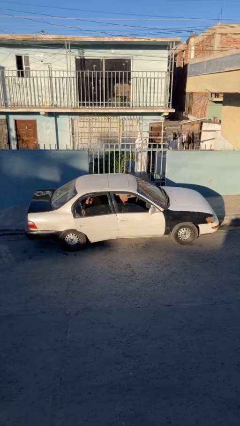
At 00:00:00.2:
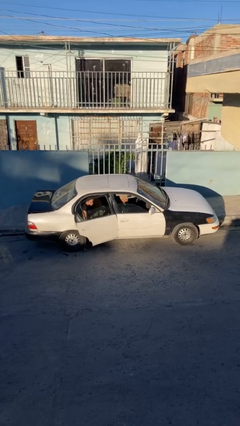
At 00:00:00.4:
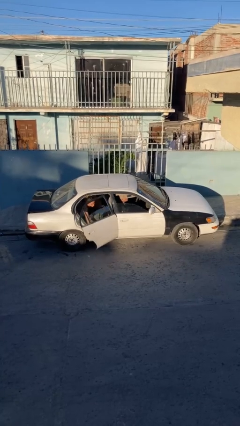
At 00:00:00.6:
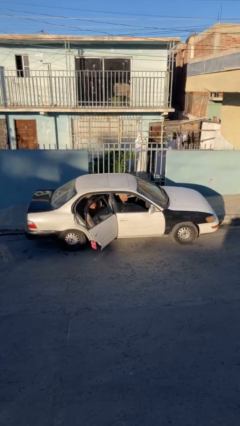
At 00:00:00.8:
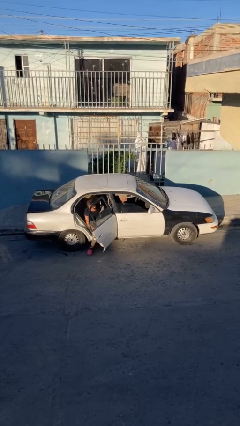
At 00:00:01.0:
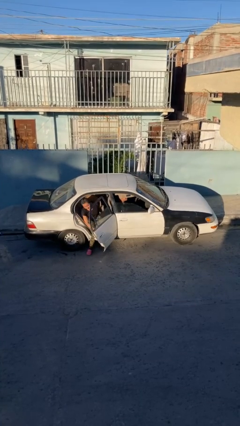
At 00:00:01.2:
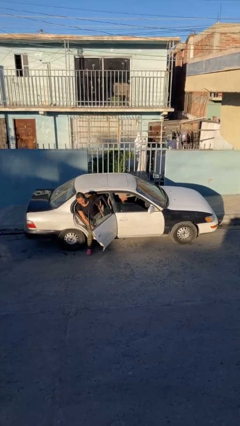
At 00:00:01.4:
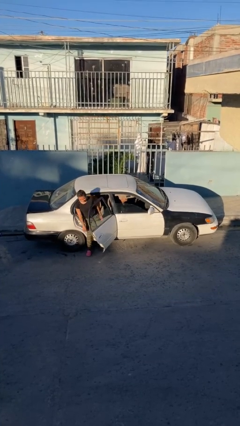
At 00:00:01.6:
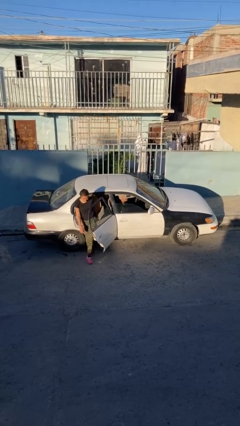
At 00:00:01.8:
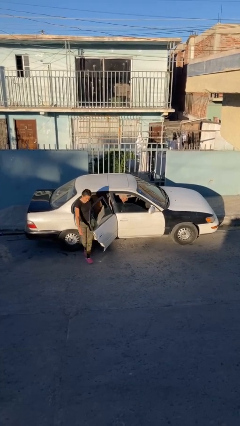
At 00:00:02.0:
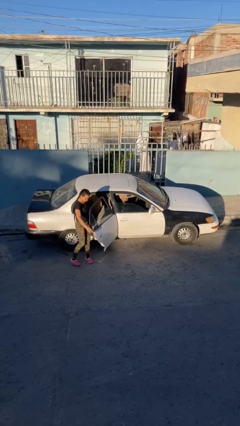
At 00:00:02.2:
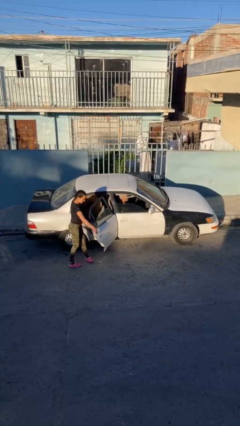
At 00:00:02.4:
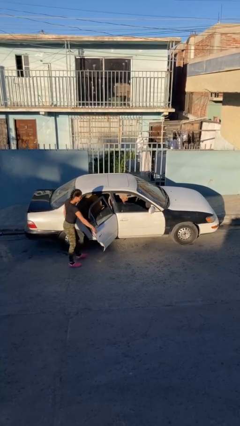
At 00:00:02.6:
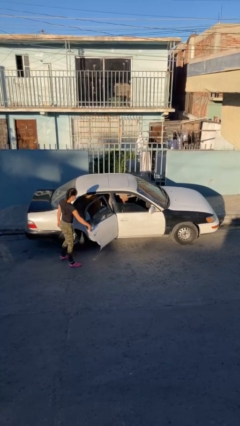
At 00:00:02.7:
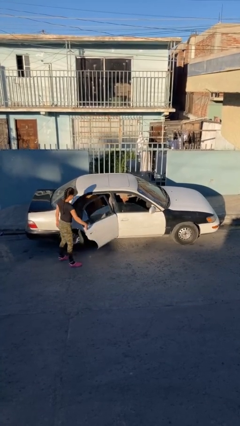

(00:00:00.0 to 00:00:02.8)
car drops off person

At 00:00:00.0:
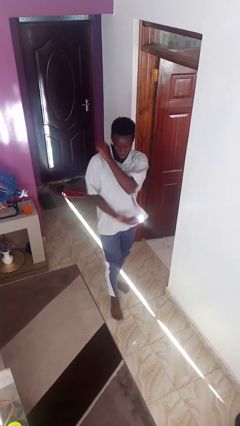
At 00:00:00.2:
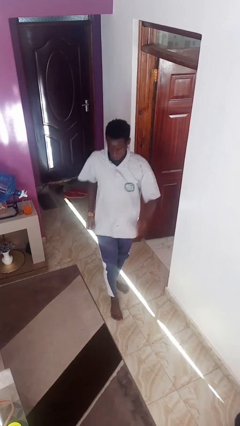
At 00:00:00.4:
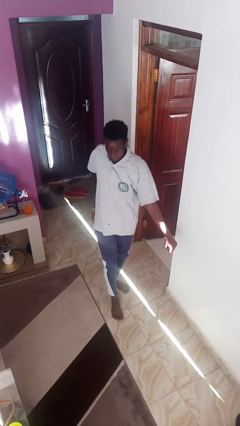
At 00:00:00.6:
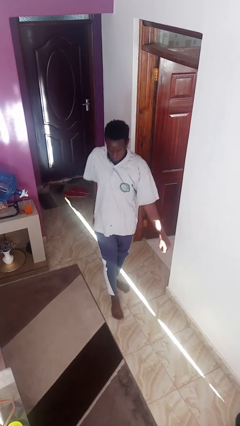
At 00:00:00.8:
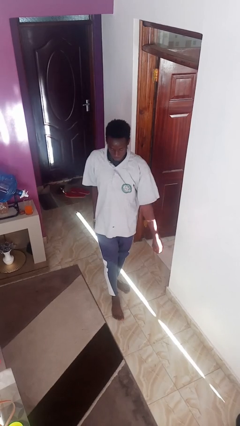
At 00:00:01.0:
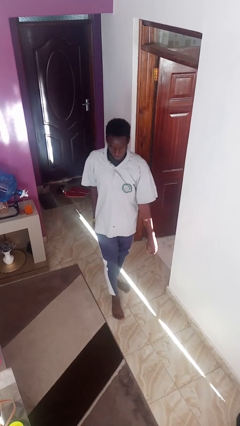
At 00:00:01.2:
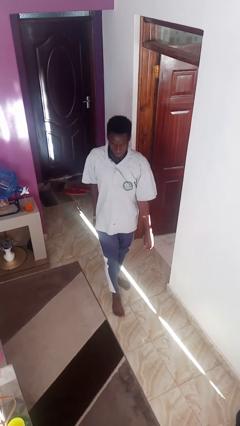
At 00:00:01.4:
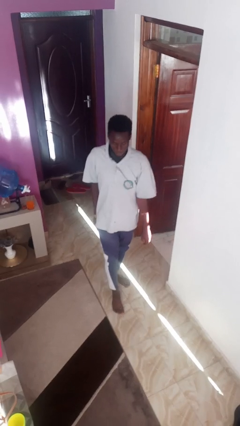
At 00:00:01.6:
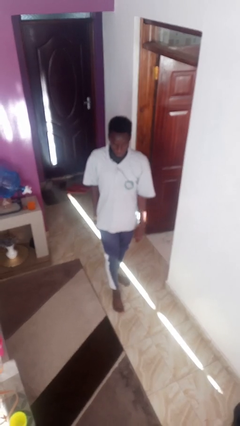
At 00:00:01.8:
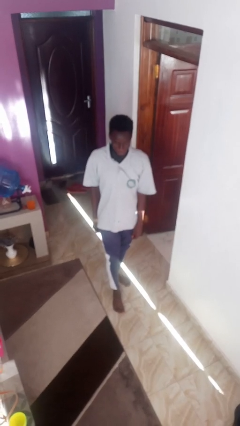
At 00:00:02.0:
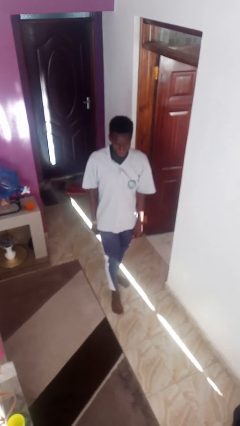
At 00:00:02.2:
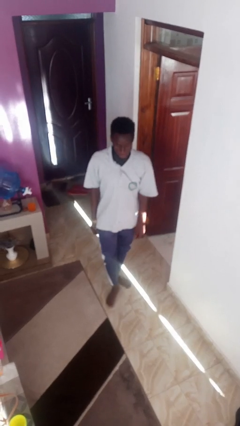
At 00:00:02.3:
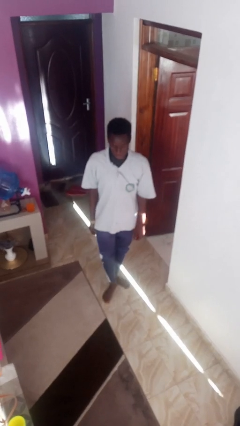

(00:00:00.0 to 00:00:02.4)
person karate chop

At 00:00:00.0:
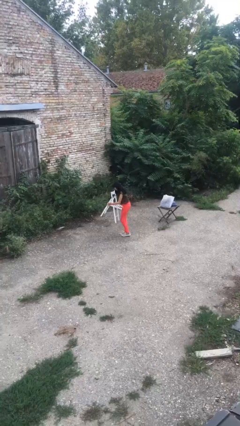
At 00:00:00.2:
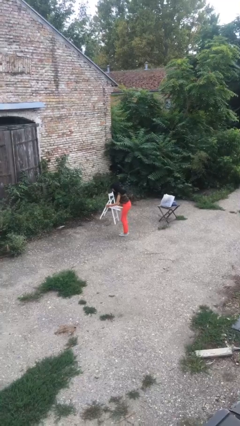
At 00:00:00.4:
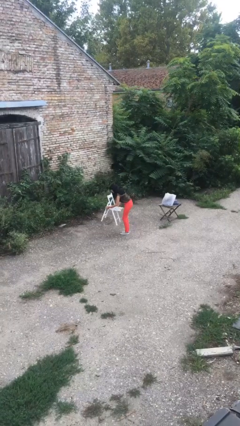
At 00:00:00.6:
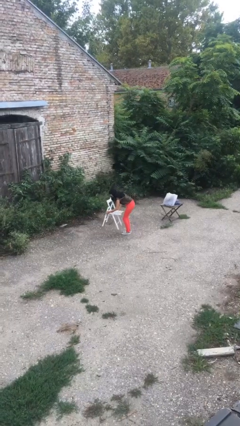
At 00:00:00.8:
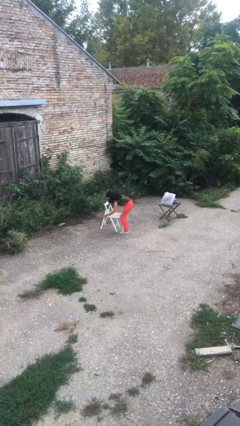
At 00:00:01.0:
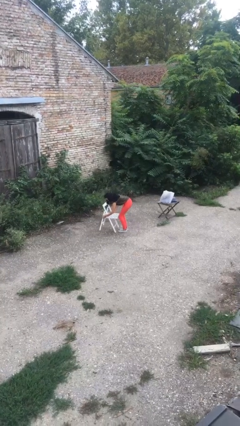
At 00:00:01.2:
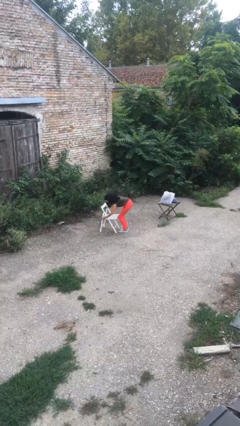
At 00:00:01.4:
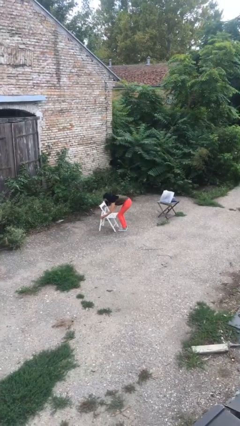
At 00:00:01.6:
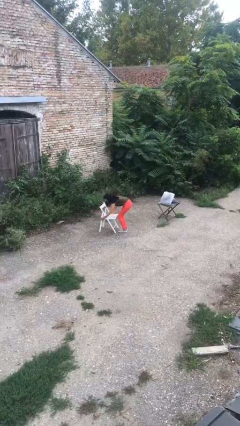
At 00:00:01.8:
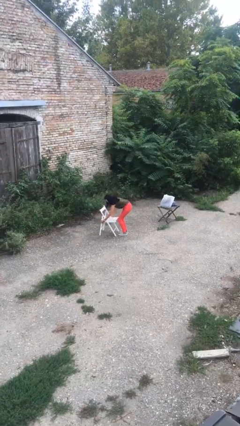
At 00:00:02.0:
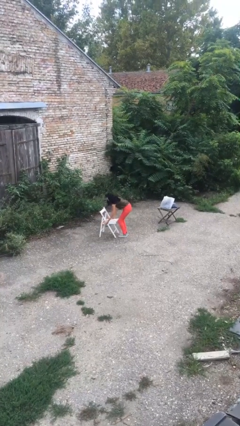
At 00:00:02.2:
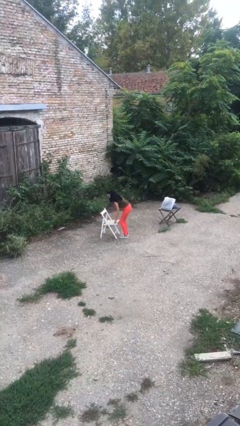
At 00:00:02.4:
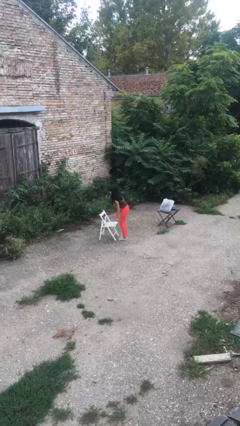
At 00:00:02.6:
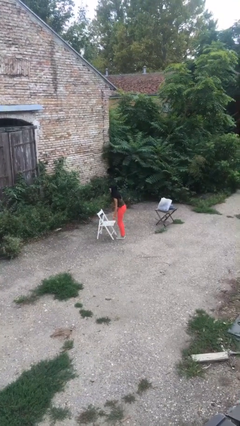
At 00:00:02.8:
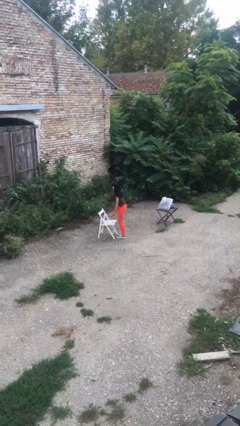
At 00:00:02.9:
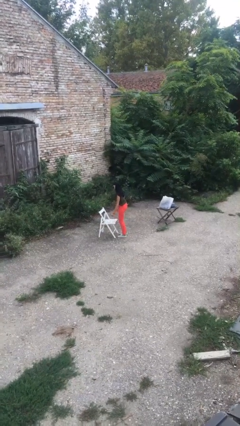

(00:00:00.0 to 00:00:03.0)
person puts down object on floor

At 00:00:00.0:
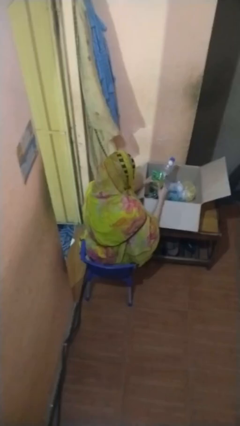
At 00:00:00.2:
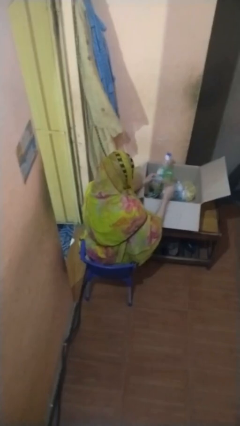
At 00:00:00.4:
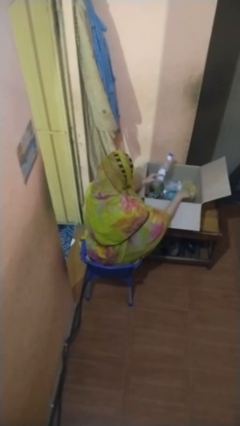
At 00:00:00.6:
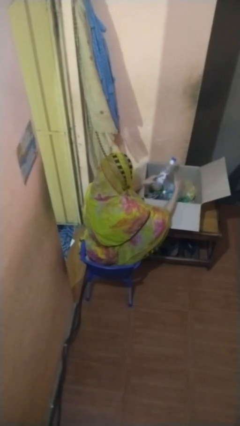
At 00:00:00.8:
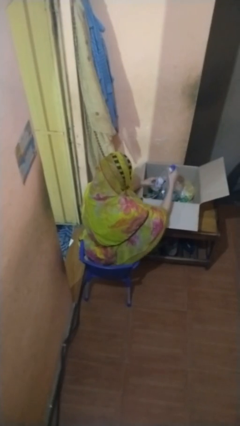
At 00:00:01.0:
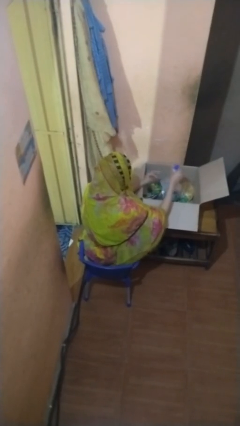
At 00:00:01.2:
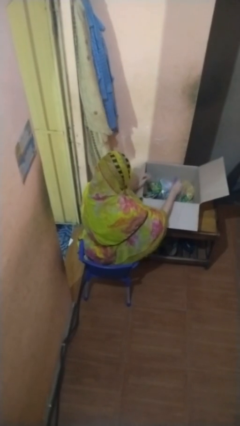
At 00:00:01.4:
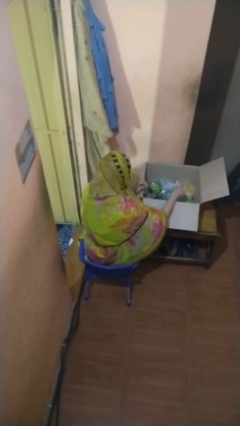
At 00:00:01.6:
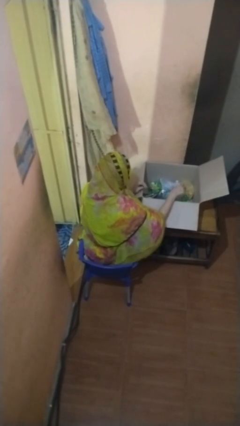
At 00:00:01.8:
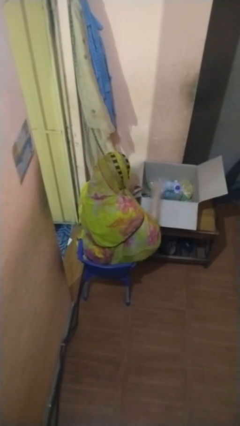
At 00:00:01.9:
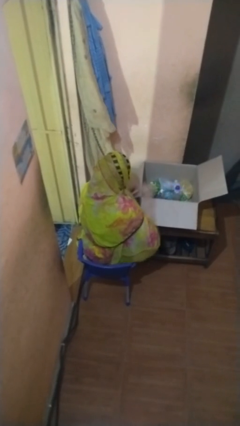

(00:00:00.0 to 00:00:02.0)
person puts object into box

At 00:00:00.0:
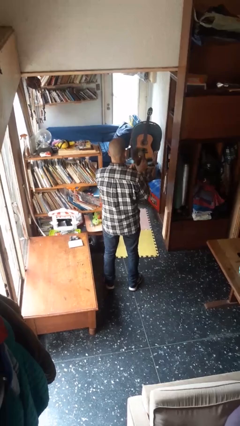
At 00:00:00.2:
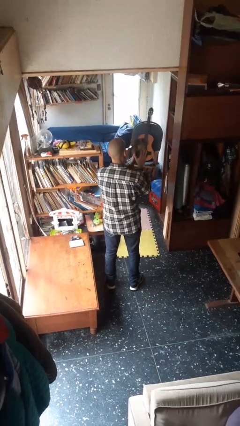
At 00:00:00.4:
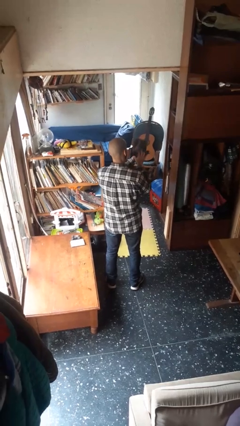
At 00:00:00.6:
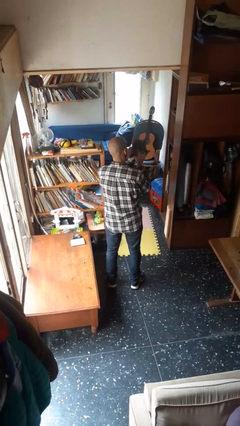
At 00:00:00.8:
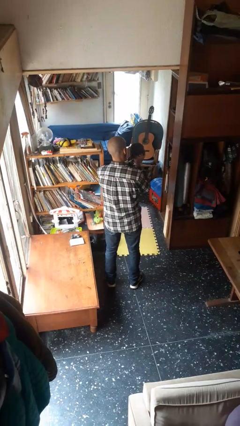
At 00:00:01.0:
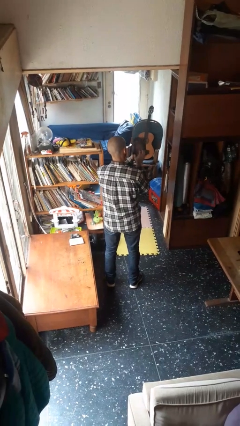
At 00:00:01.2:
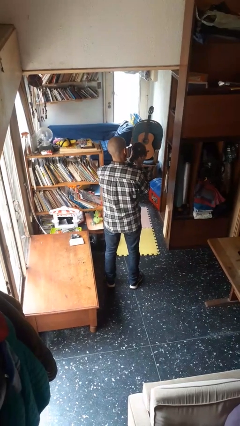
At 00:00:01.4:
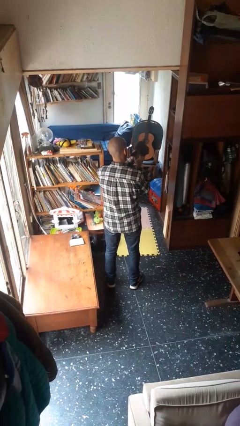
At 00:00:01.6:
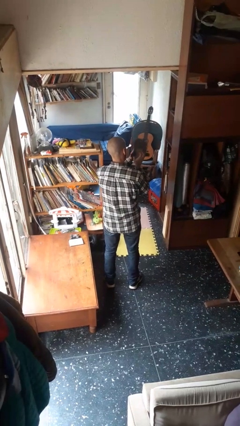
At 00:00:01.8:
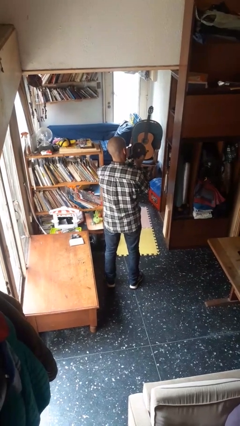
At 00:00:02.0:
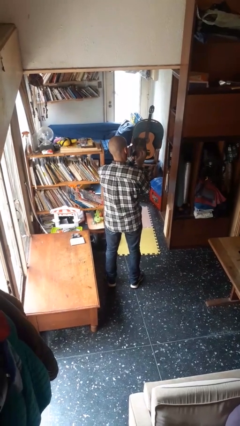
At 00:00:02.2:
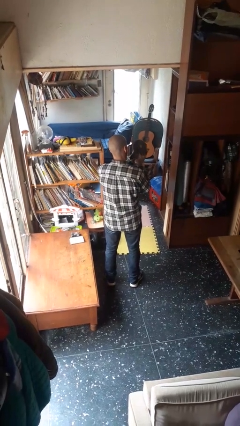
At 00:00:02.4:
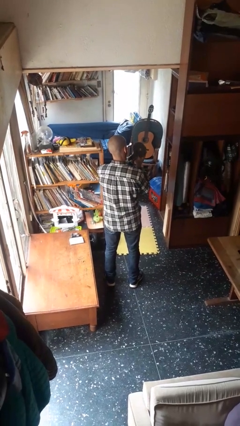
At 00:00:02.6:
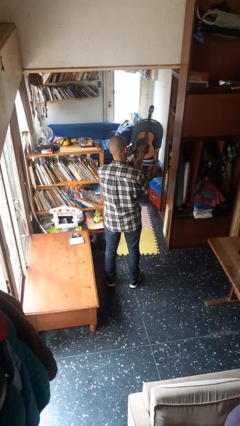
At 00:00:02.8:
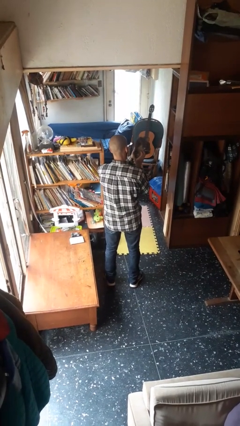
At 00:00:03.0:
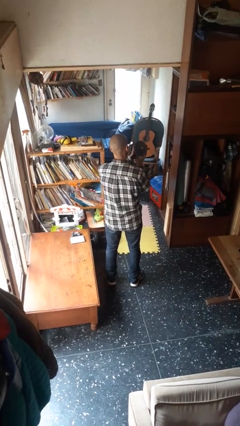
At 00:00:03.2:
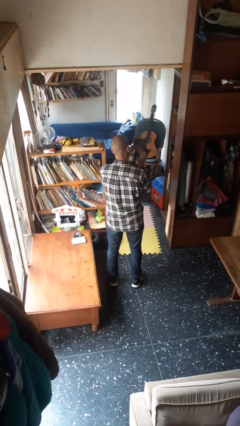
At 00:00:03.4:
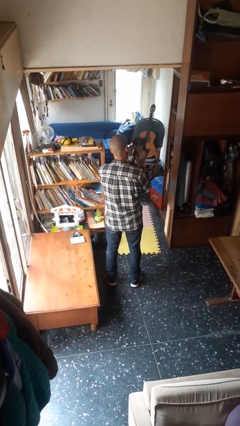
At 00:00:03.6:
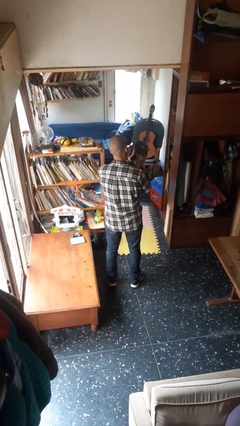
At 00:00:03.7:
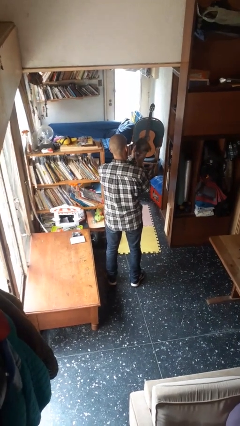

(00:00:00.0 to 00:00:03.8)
person squeezes object

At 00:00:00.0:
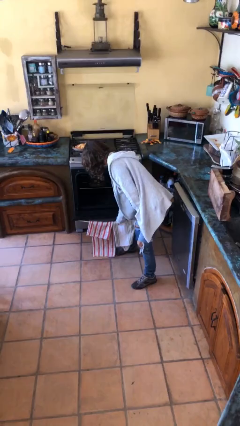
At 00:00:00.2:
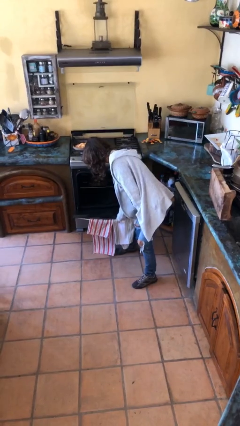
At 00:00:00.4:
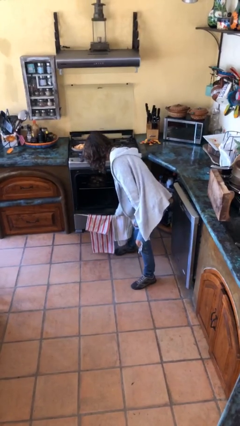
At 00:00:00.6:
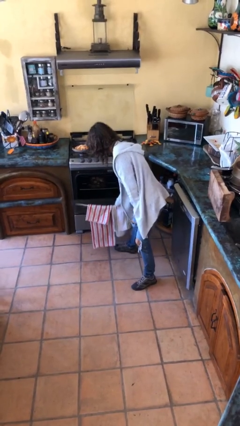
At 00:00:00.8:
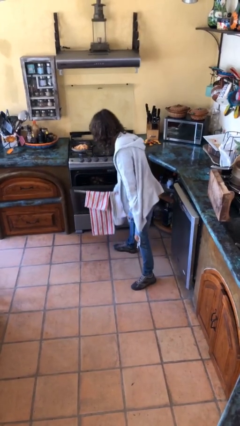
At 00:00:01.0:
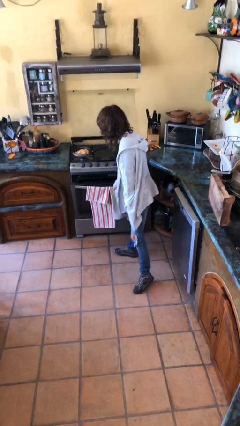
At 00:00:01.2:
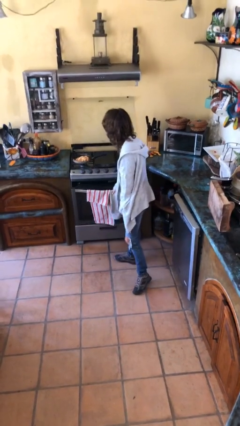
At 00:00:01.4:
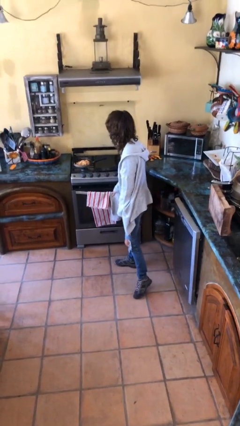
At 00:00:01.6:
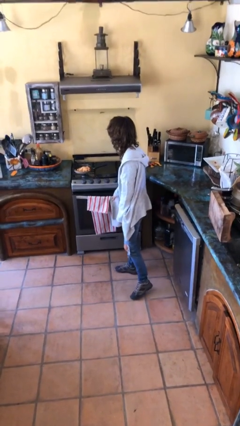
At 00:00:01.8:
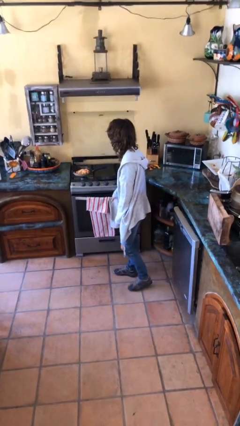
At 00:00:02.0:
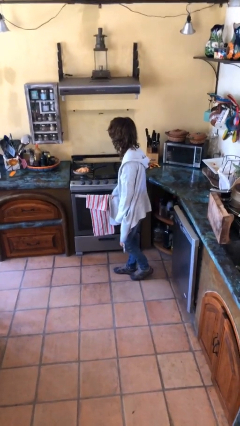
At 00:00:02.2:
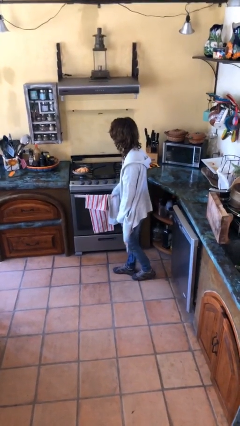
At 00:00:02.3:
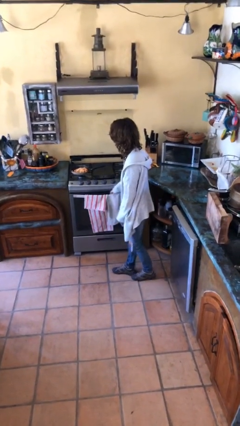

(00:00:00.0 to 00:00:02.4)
person closes oven door

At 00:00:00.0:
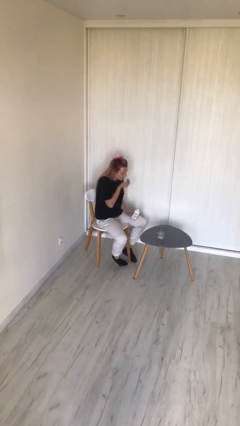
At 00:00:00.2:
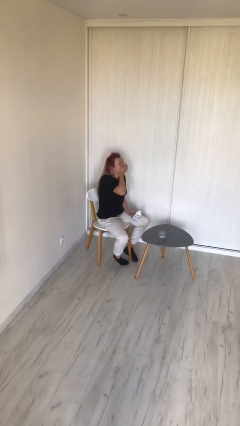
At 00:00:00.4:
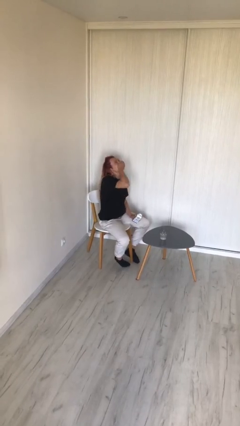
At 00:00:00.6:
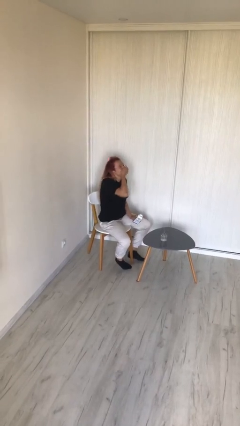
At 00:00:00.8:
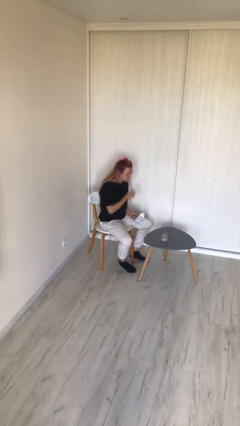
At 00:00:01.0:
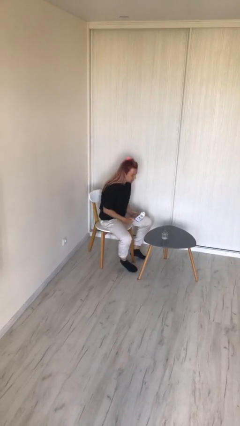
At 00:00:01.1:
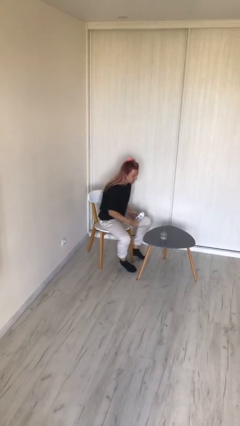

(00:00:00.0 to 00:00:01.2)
person takes medicine pills
